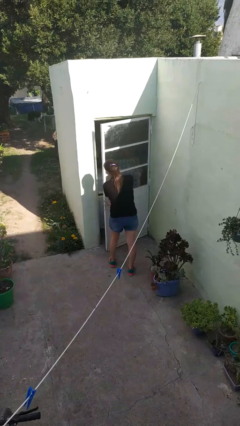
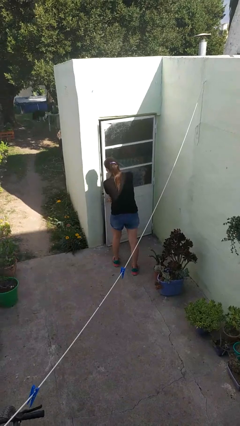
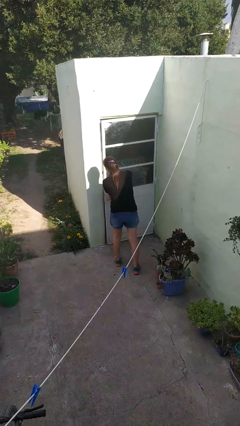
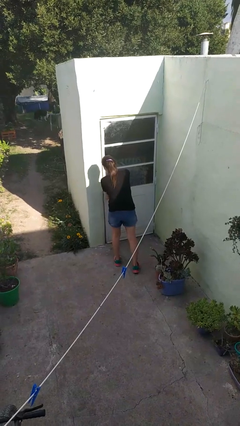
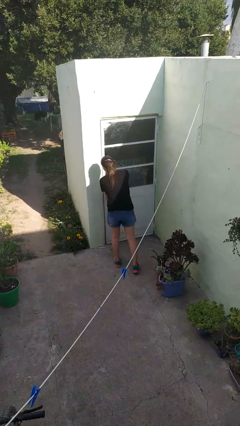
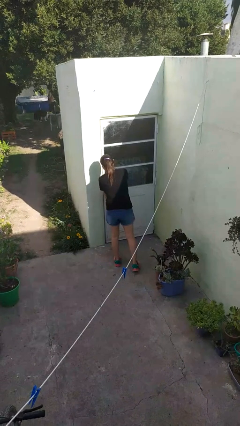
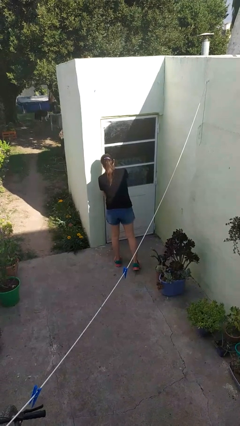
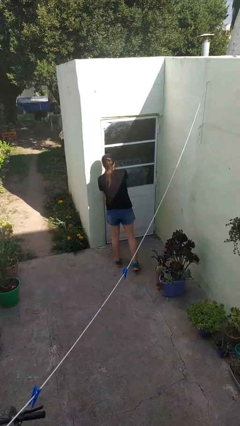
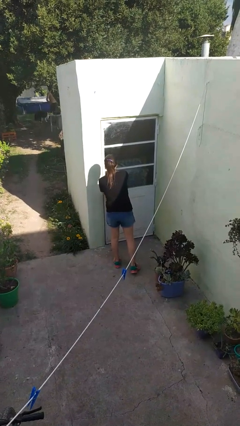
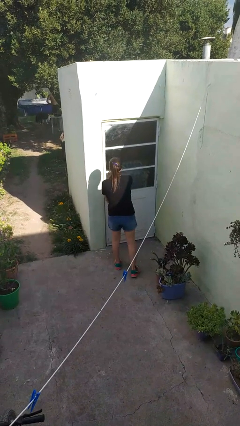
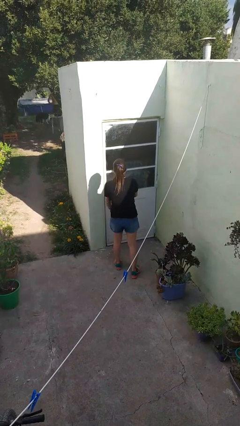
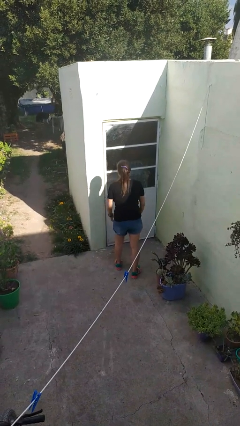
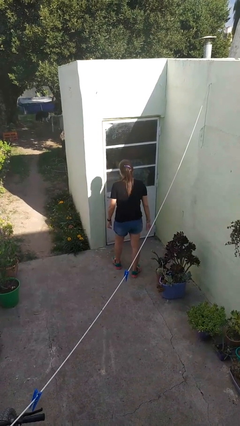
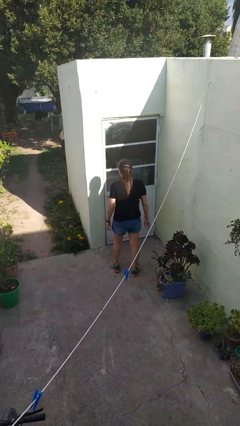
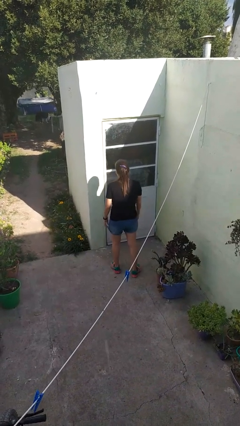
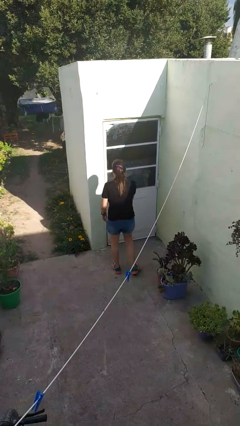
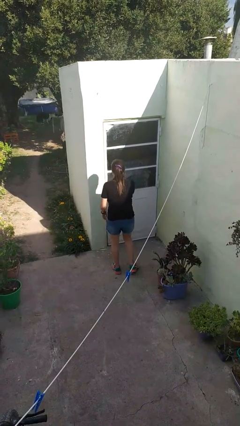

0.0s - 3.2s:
person closes facility door

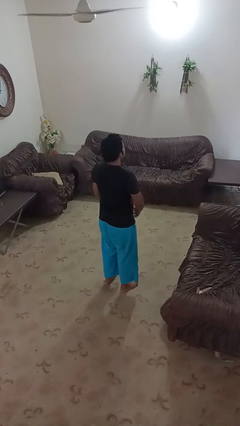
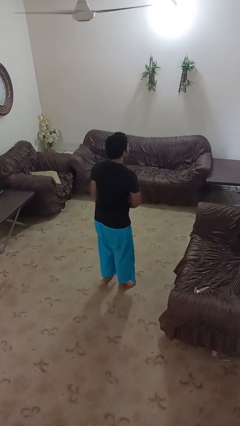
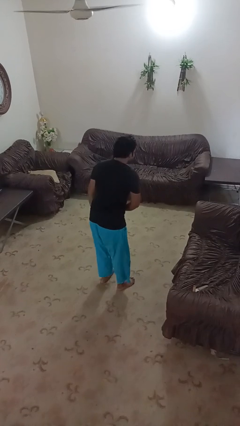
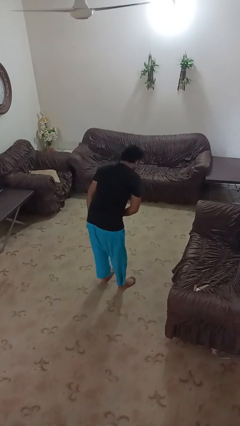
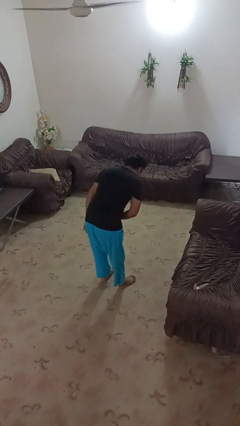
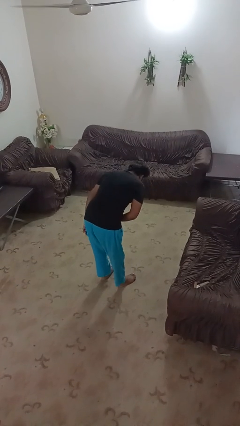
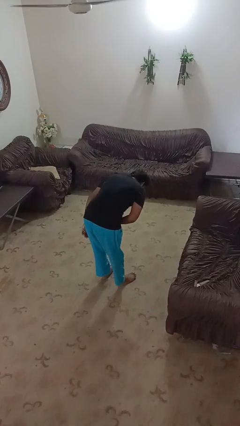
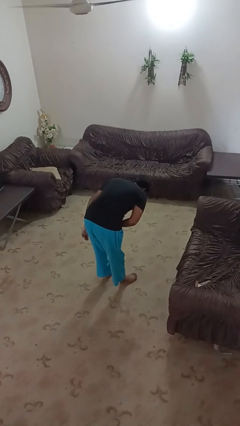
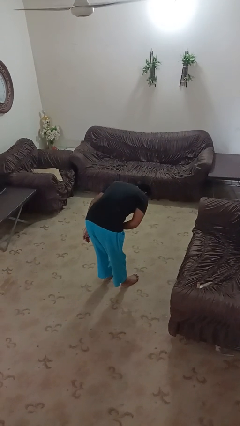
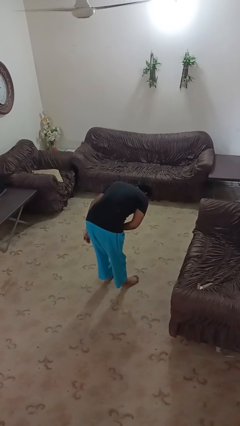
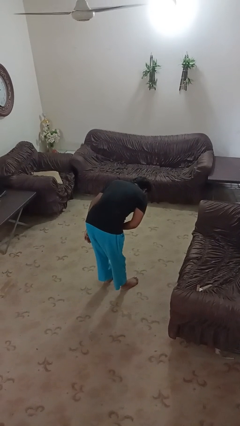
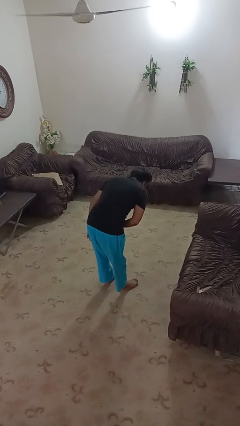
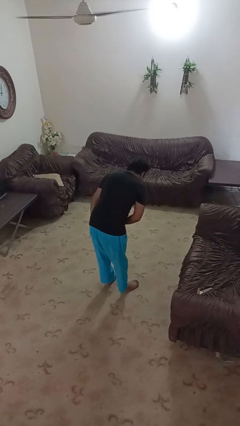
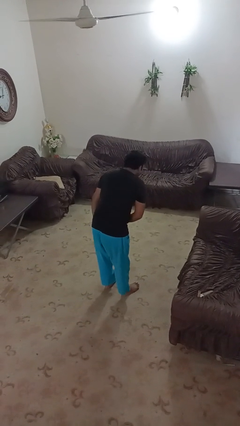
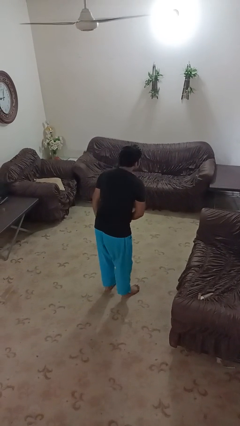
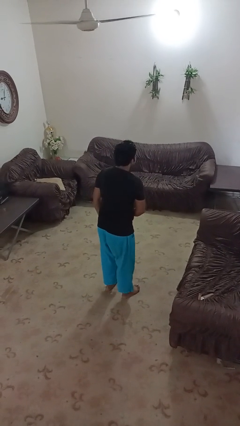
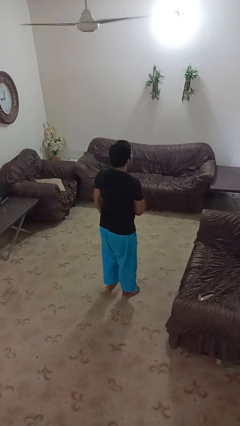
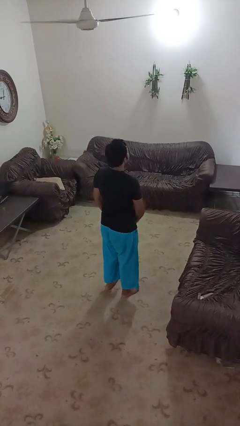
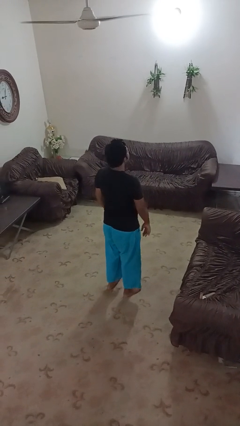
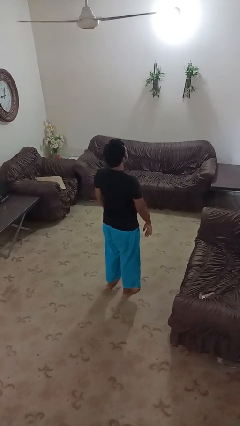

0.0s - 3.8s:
person bows

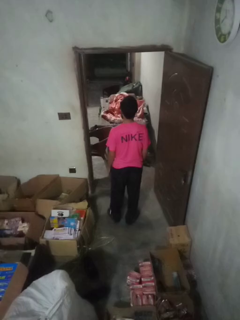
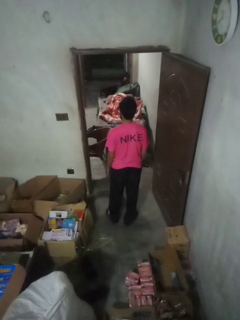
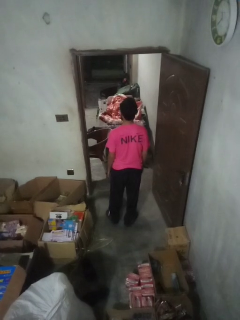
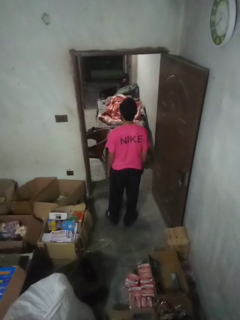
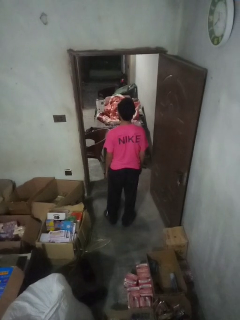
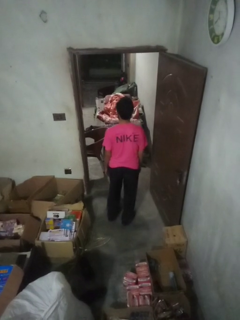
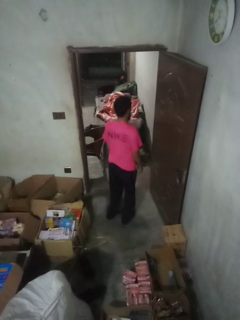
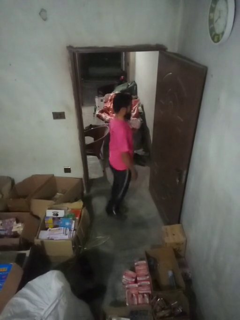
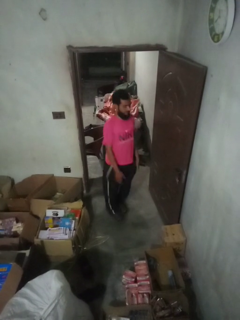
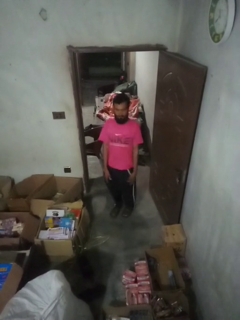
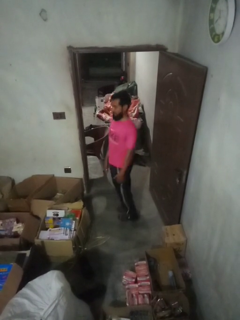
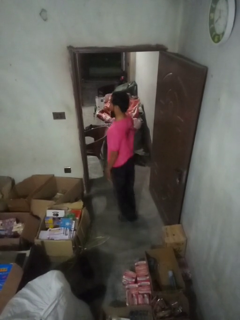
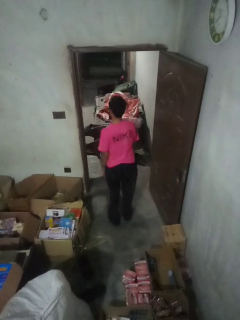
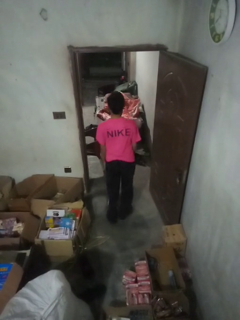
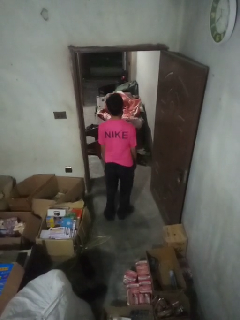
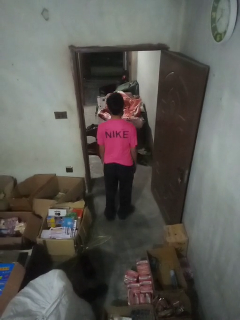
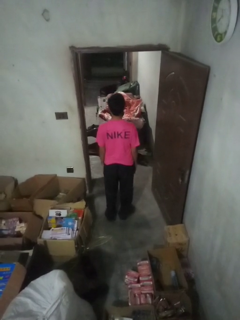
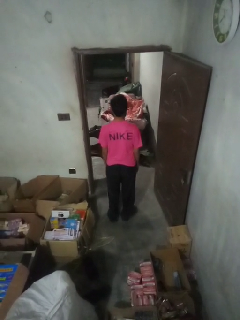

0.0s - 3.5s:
person twirls

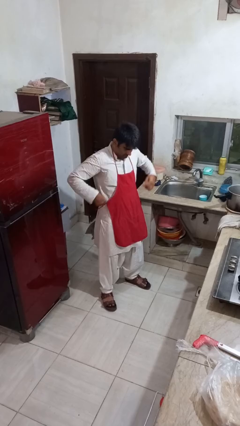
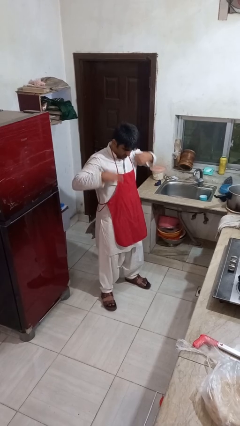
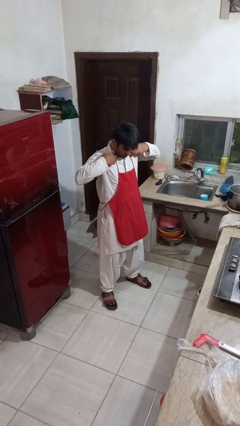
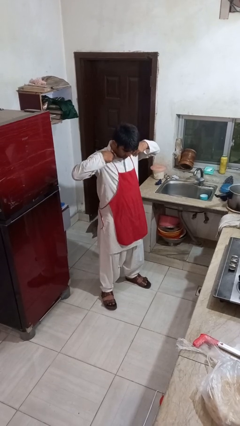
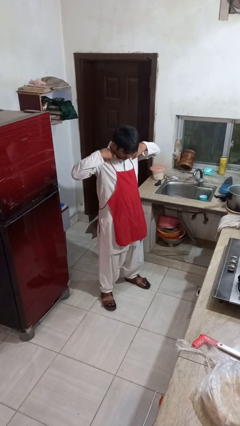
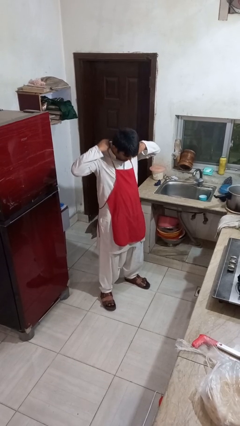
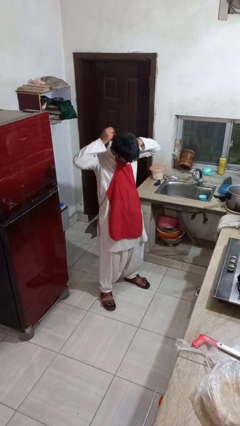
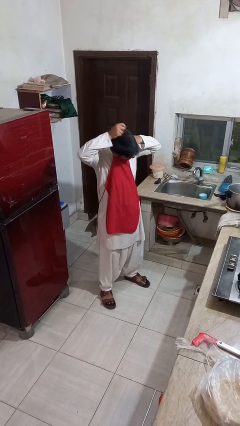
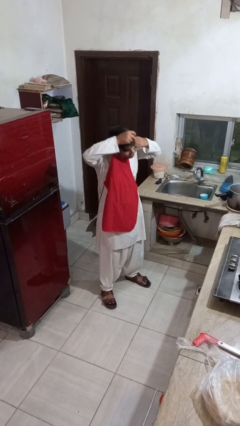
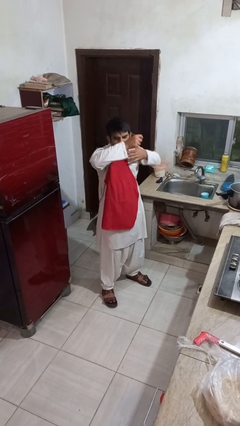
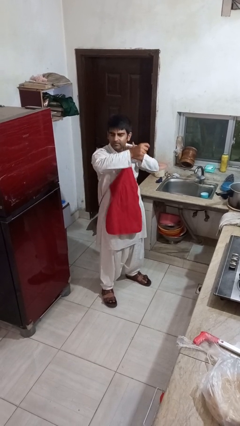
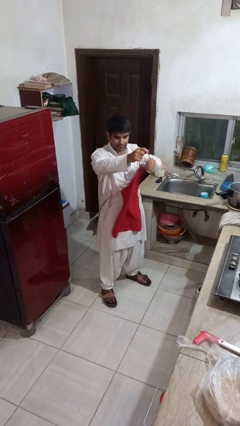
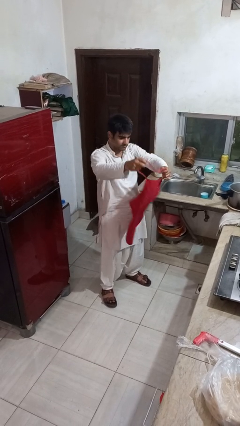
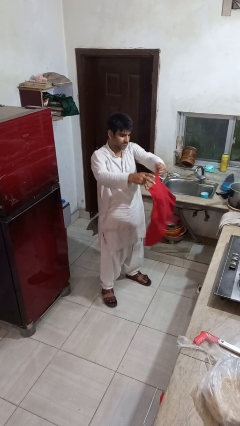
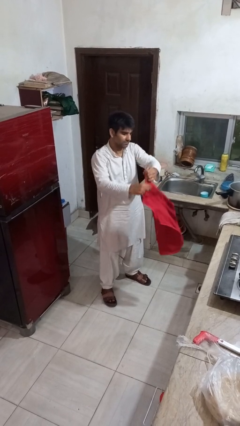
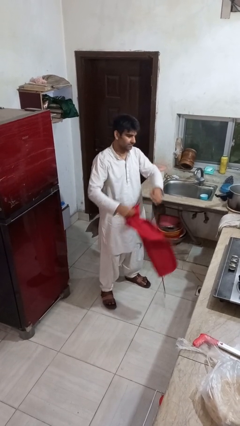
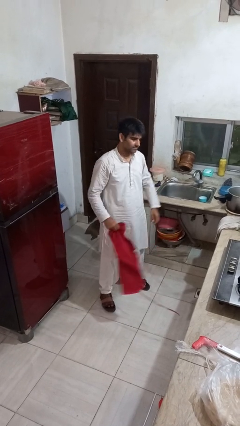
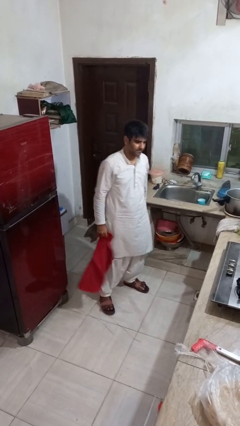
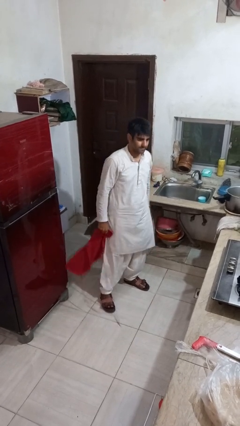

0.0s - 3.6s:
person takes off apron

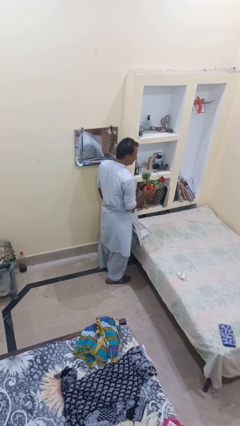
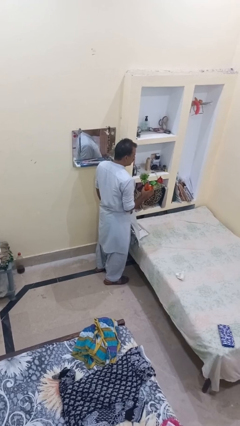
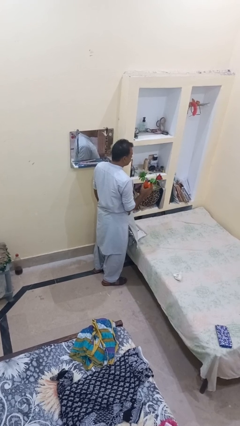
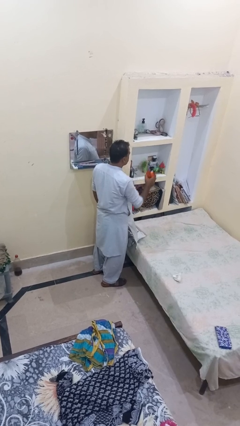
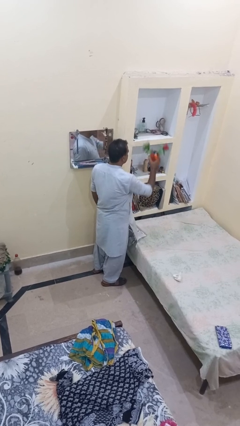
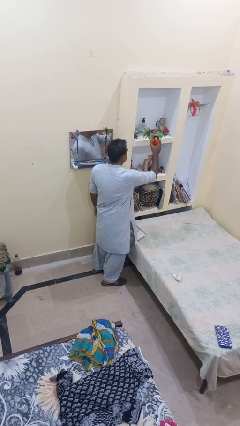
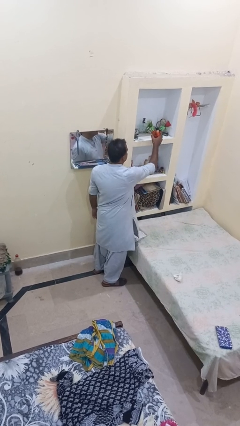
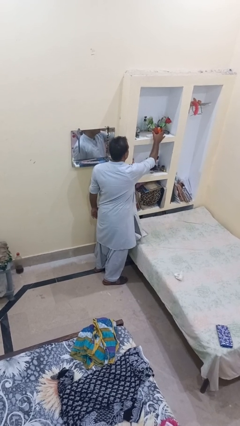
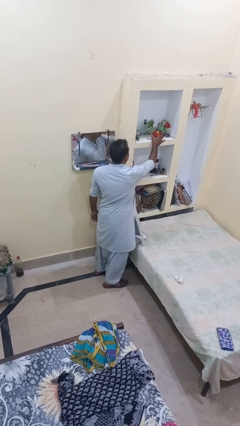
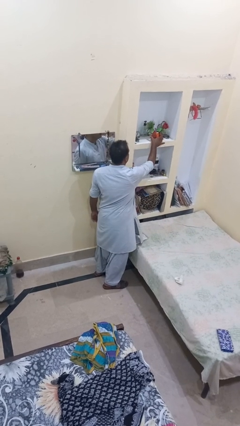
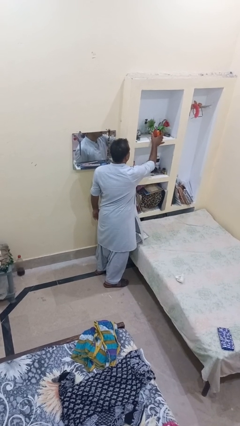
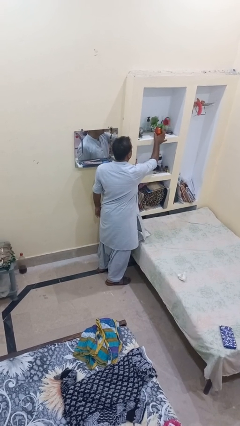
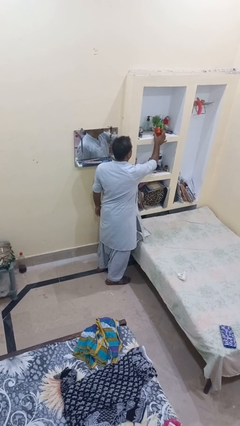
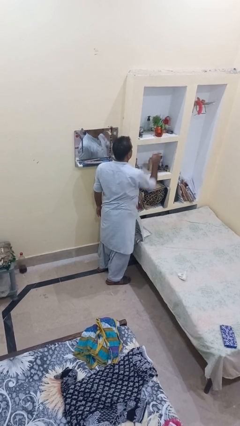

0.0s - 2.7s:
person puts down object on shelf

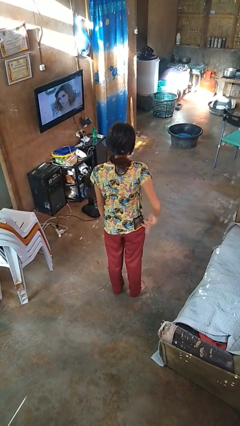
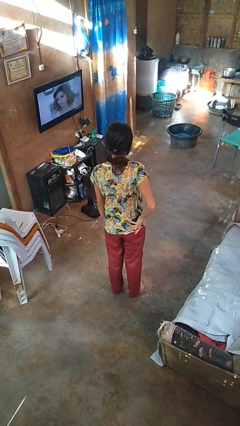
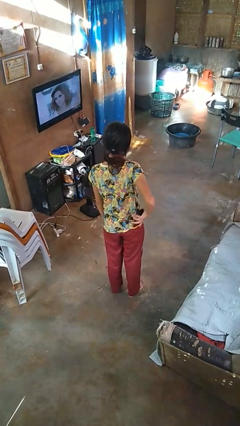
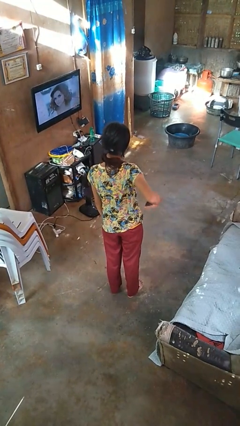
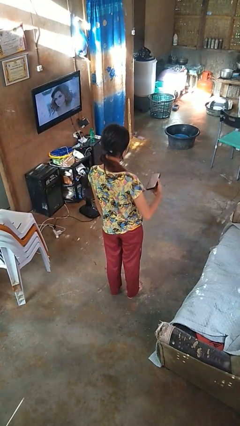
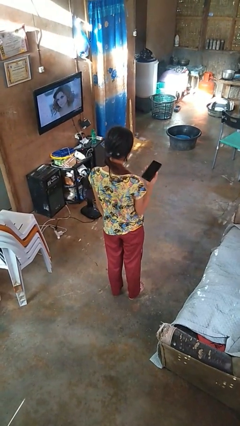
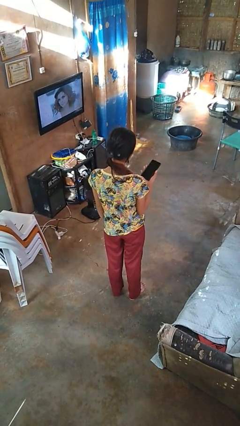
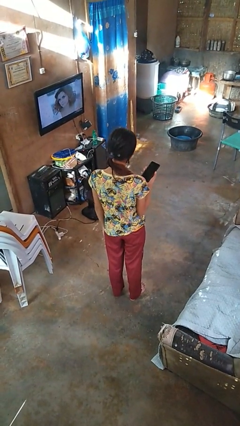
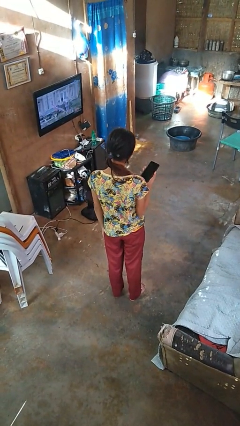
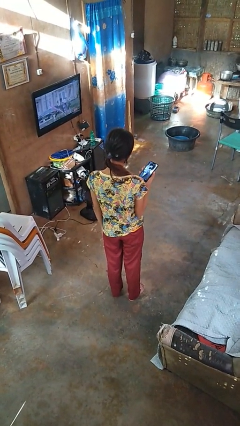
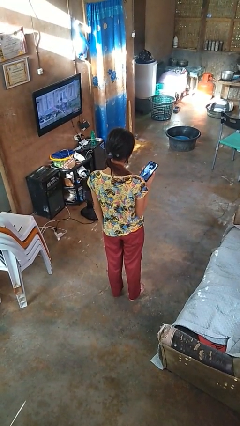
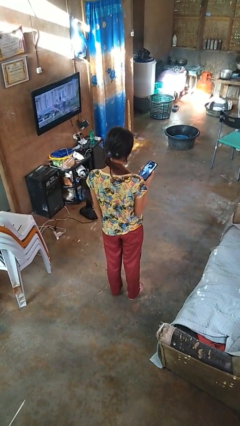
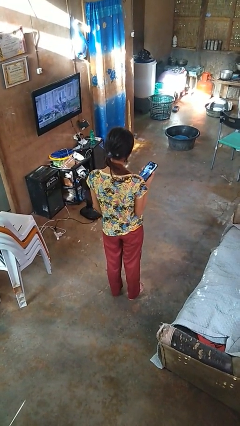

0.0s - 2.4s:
person takes phone from pocket
